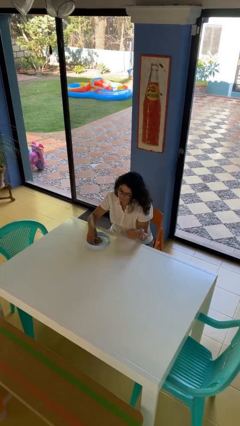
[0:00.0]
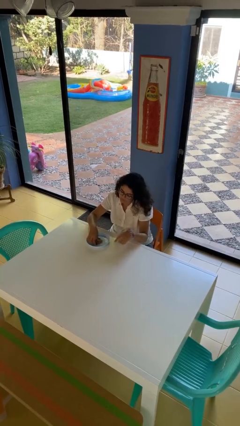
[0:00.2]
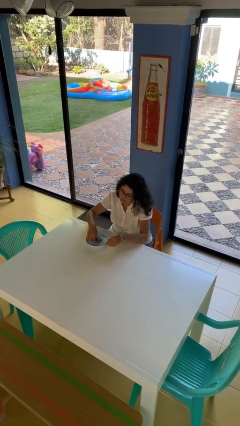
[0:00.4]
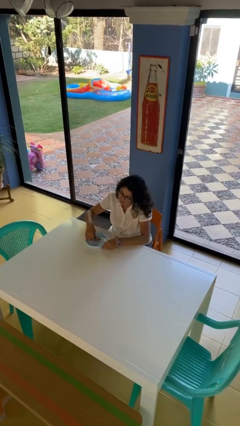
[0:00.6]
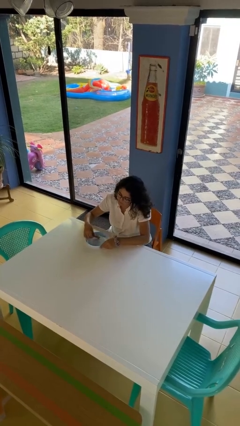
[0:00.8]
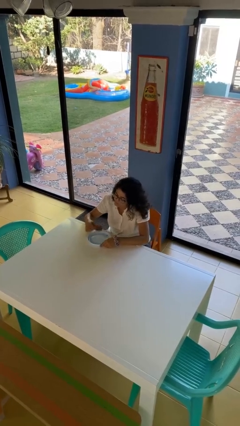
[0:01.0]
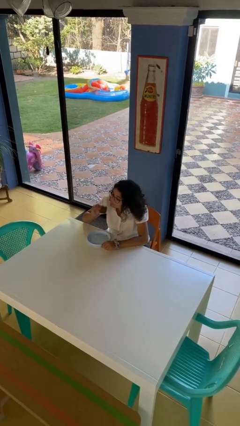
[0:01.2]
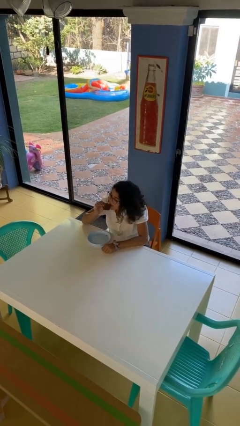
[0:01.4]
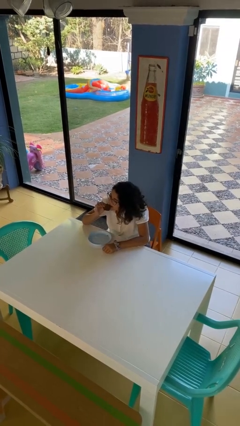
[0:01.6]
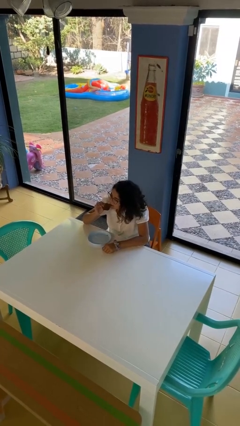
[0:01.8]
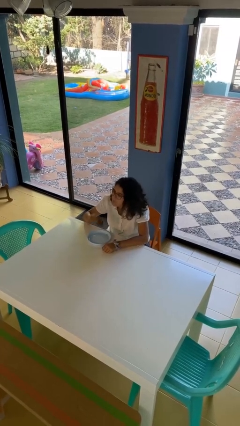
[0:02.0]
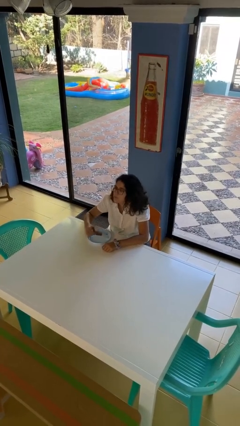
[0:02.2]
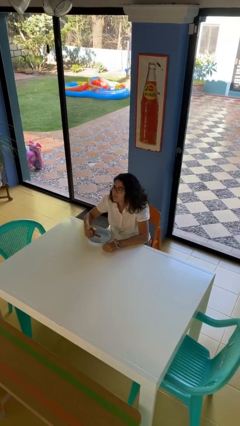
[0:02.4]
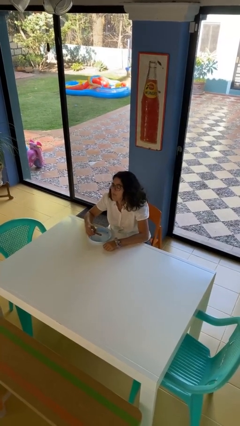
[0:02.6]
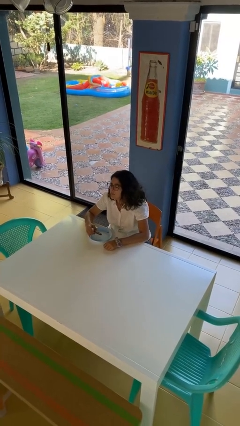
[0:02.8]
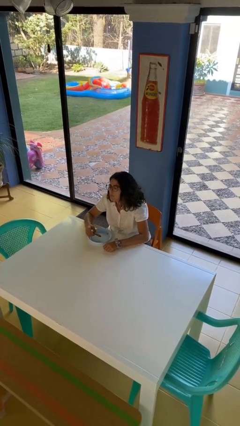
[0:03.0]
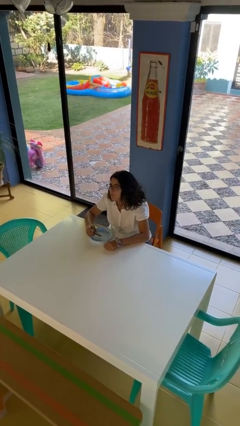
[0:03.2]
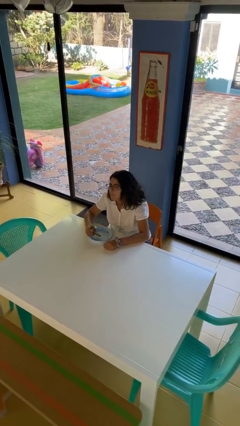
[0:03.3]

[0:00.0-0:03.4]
person eats with hands

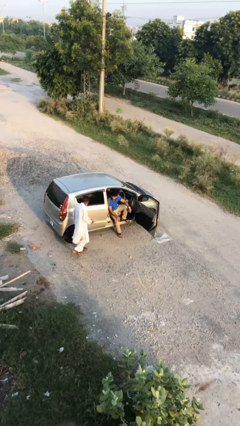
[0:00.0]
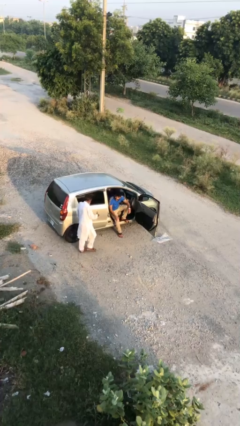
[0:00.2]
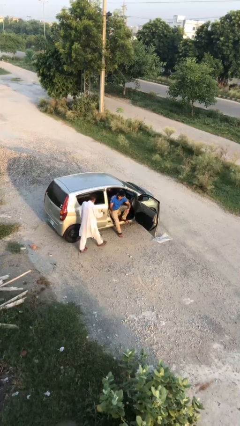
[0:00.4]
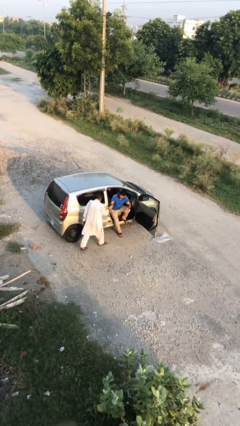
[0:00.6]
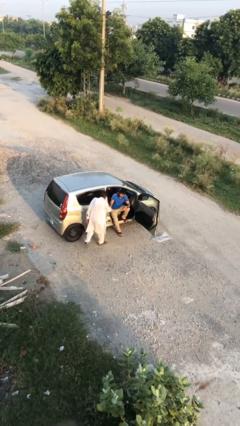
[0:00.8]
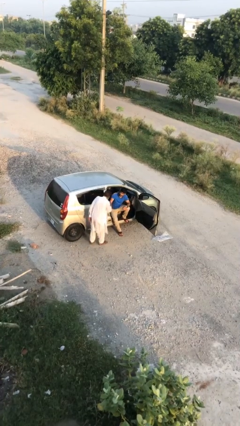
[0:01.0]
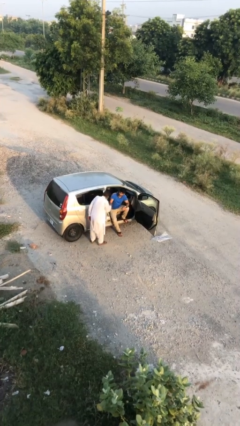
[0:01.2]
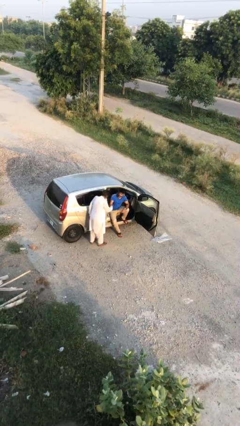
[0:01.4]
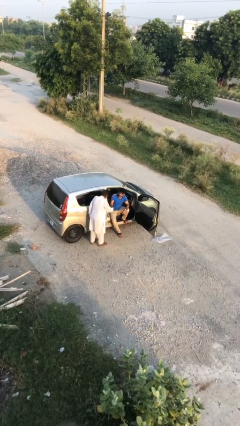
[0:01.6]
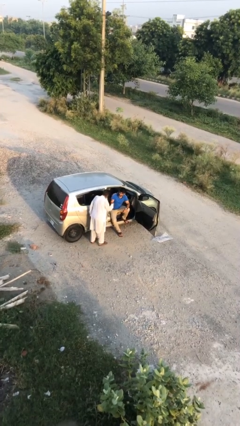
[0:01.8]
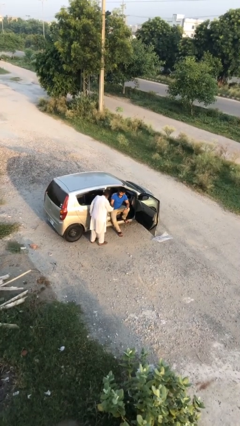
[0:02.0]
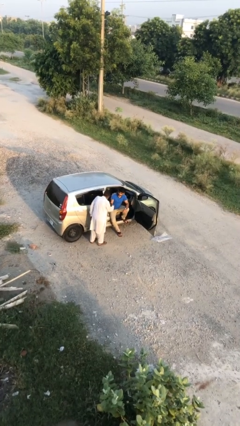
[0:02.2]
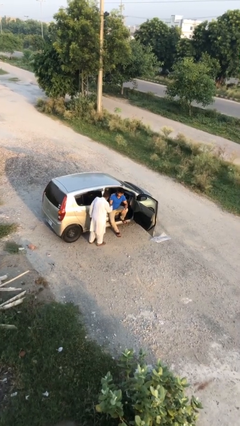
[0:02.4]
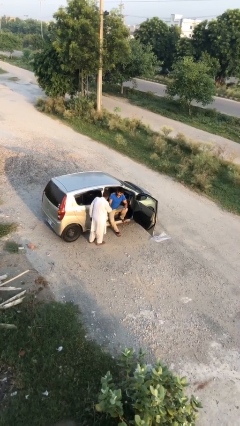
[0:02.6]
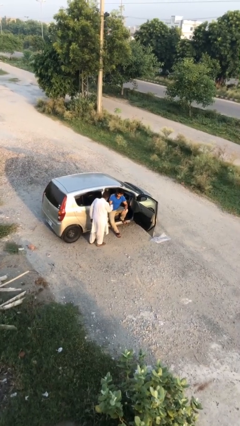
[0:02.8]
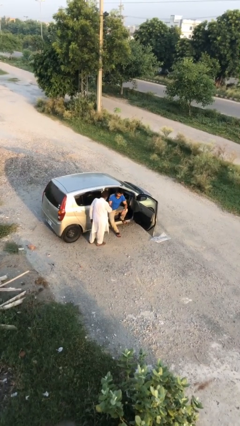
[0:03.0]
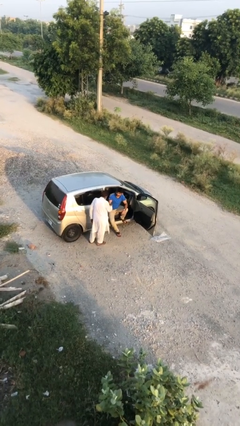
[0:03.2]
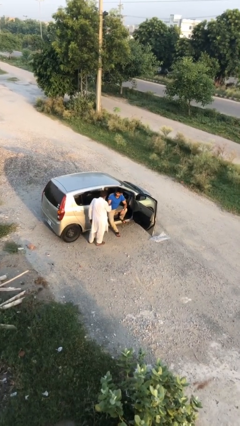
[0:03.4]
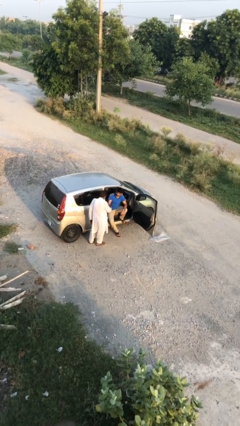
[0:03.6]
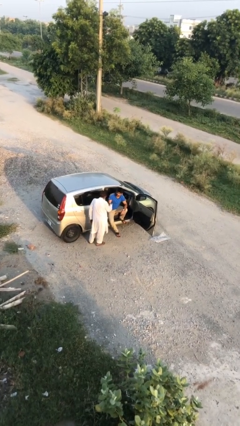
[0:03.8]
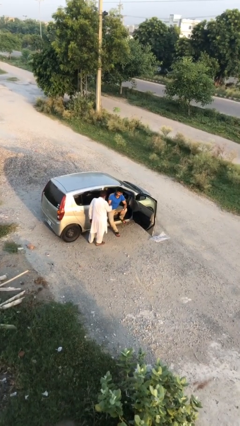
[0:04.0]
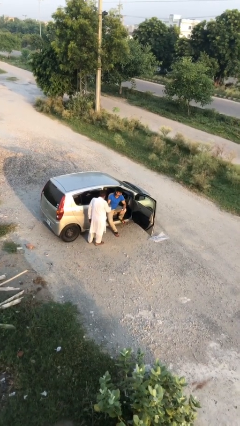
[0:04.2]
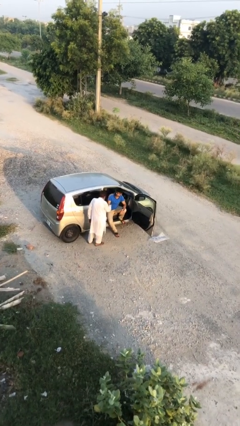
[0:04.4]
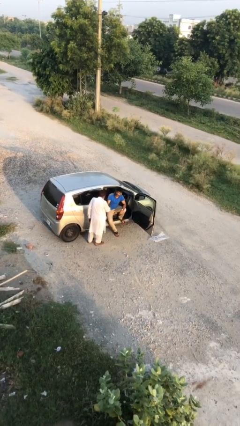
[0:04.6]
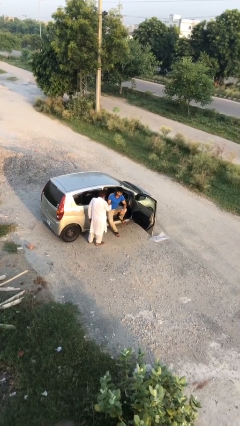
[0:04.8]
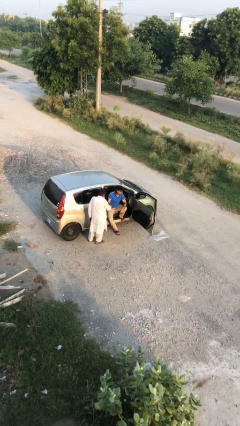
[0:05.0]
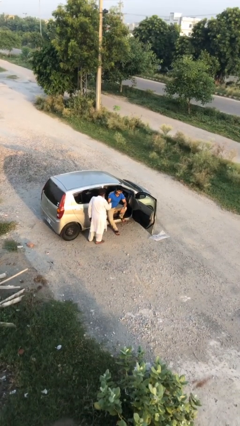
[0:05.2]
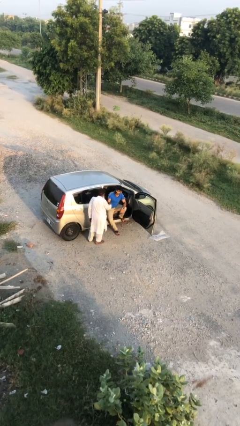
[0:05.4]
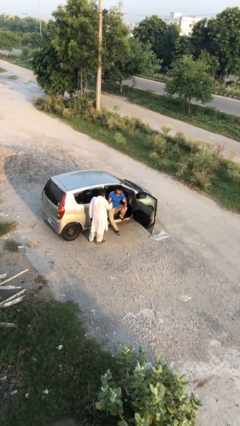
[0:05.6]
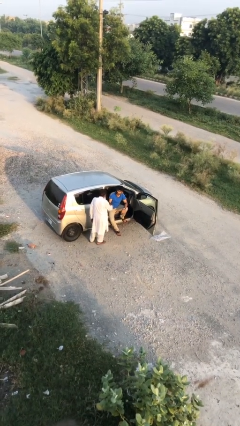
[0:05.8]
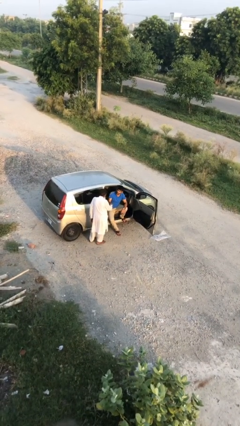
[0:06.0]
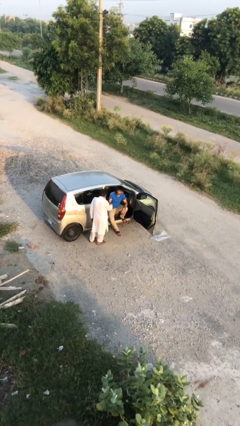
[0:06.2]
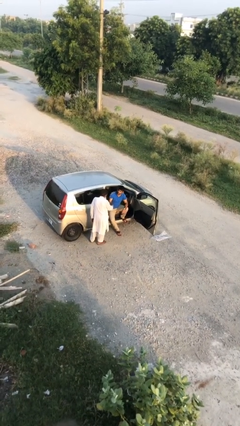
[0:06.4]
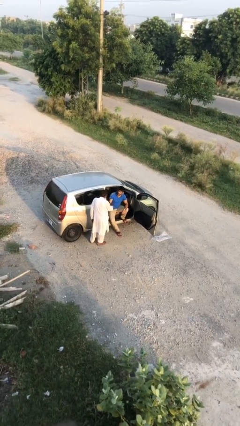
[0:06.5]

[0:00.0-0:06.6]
person shakes hand

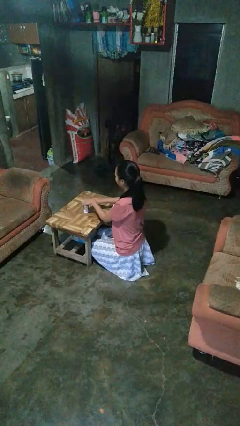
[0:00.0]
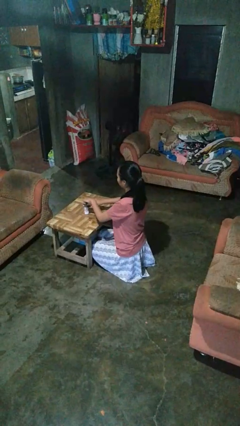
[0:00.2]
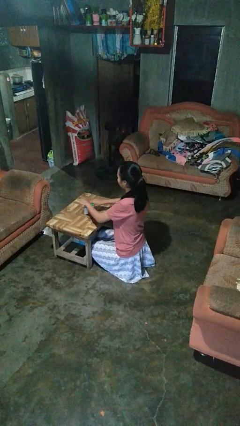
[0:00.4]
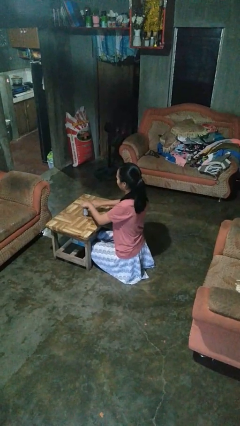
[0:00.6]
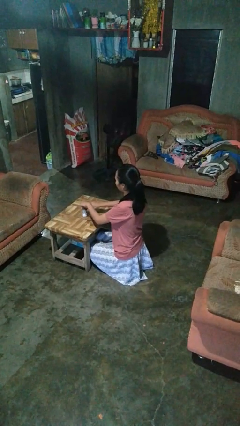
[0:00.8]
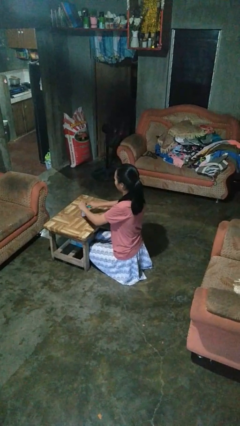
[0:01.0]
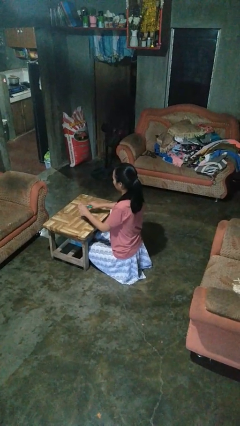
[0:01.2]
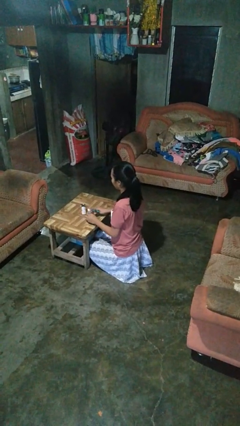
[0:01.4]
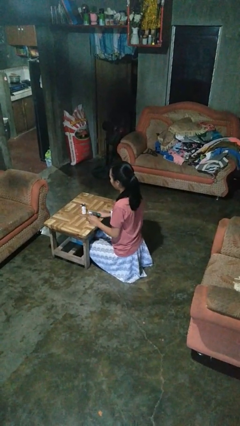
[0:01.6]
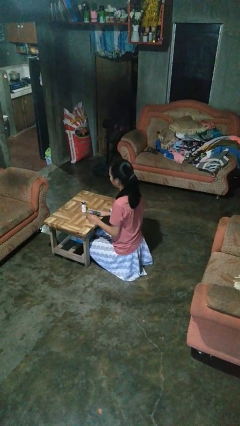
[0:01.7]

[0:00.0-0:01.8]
person opens can with can opener

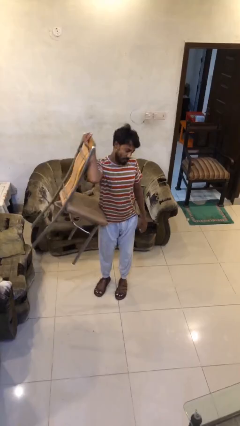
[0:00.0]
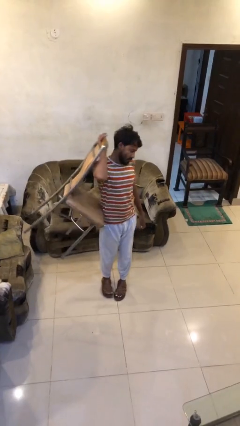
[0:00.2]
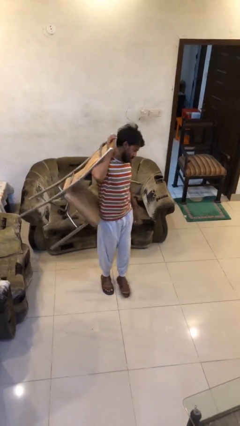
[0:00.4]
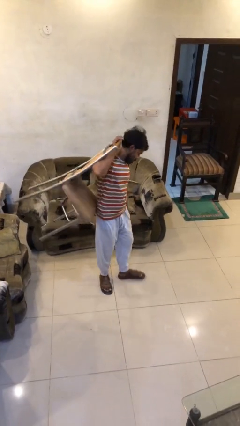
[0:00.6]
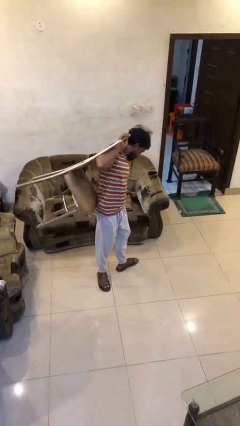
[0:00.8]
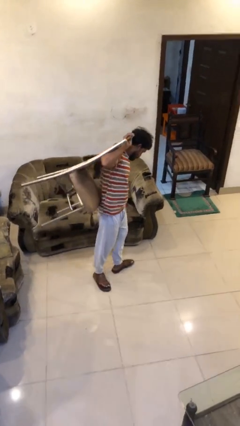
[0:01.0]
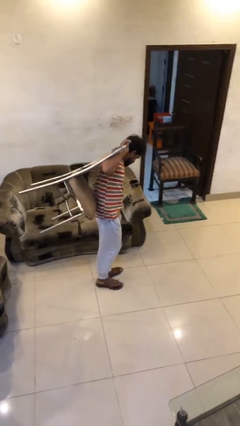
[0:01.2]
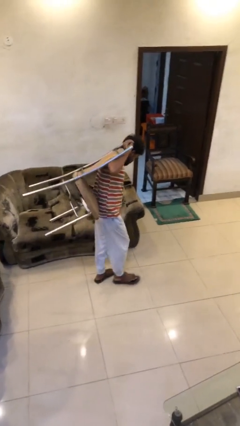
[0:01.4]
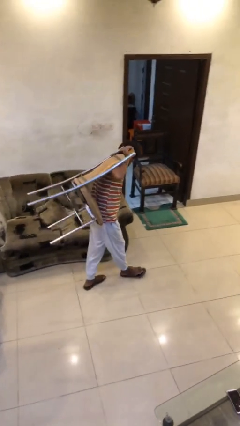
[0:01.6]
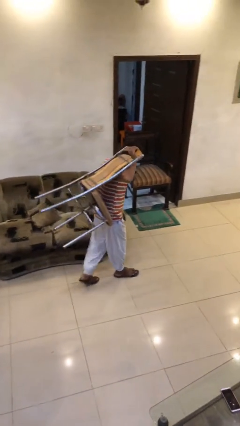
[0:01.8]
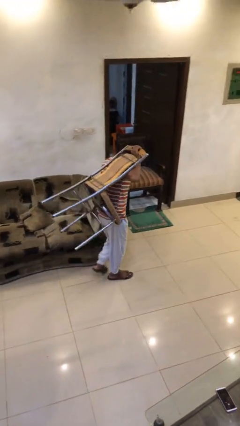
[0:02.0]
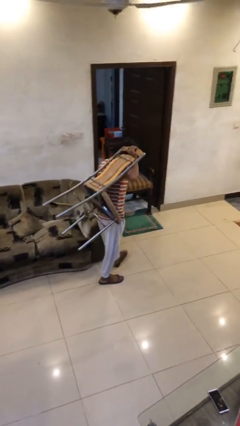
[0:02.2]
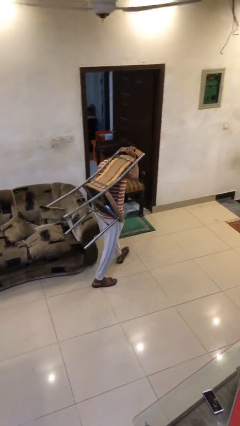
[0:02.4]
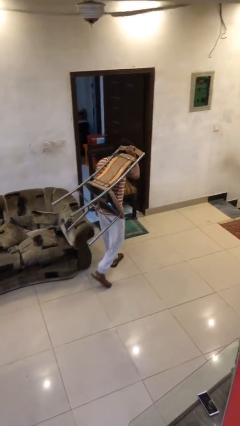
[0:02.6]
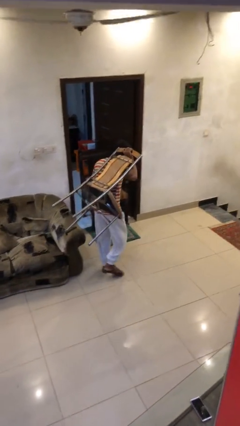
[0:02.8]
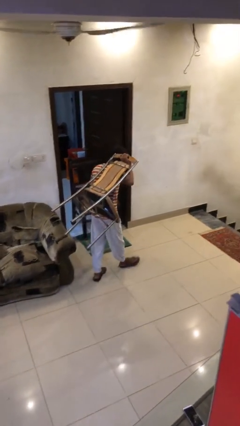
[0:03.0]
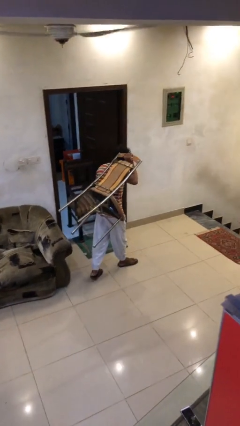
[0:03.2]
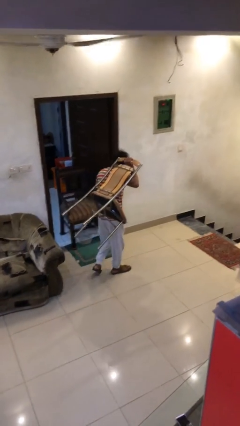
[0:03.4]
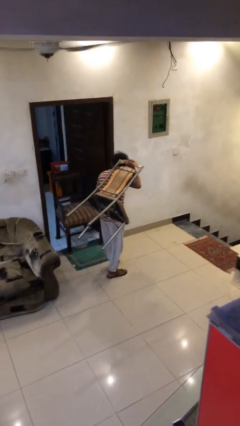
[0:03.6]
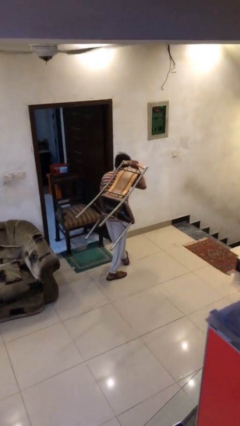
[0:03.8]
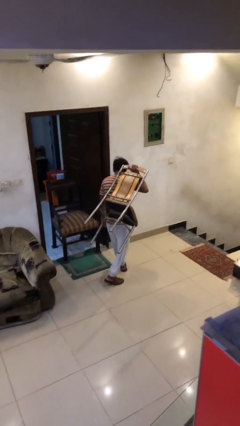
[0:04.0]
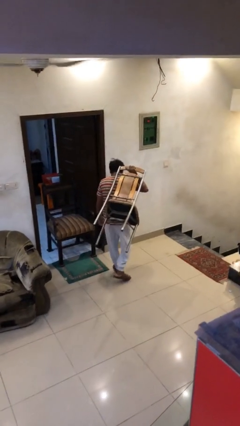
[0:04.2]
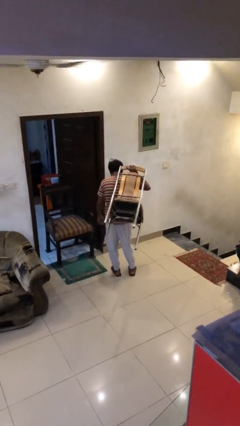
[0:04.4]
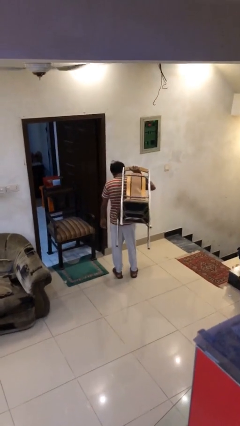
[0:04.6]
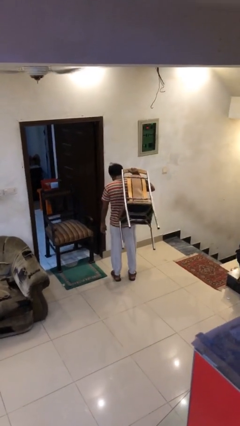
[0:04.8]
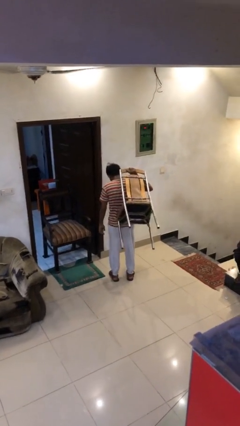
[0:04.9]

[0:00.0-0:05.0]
person carries heavy object

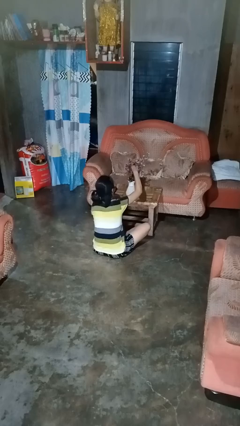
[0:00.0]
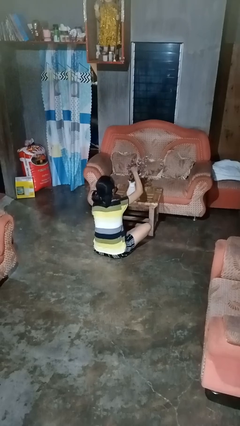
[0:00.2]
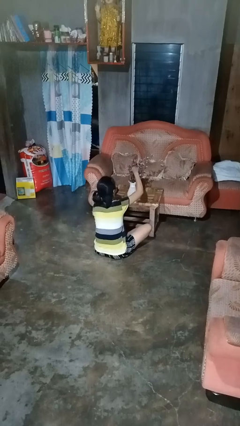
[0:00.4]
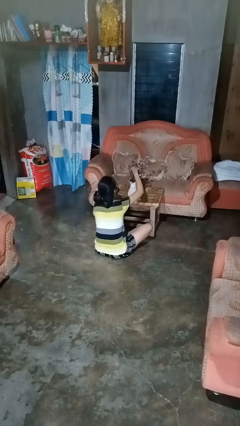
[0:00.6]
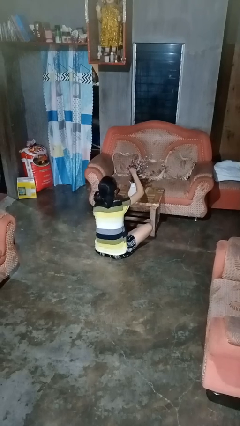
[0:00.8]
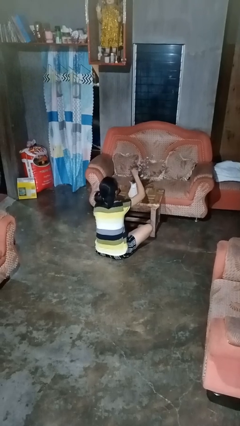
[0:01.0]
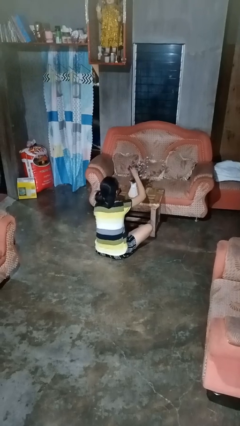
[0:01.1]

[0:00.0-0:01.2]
person arranges flowers in vase

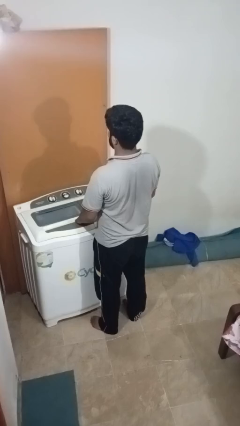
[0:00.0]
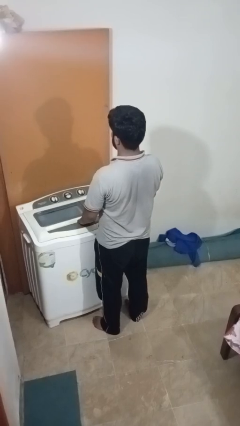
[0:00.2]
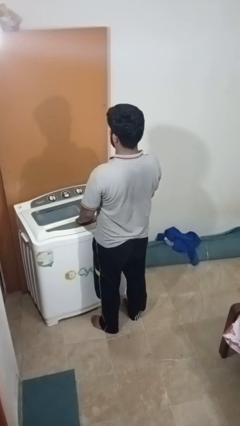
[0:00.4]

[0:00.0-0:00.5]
person closes clothes washer
